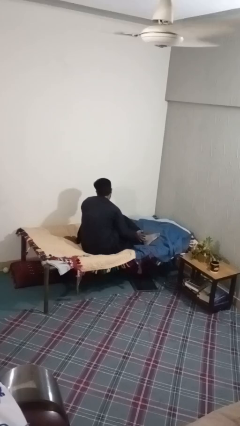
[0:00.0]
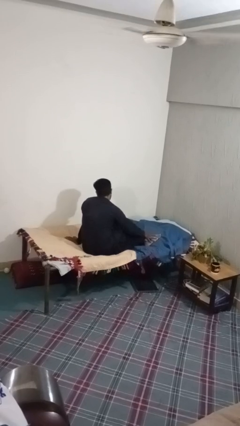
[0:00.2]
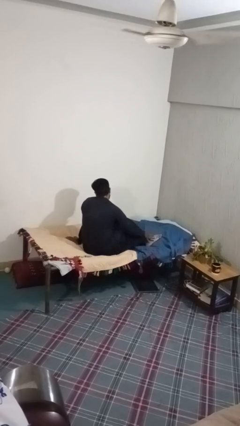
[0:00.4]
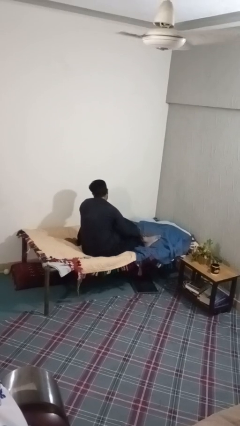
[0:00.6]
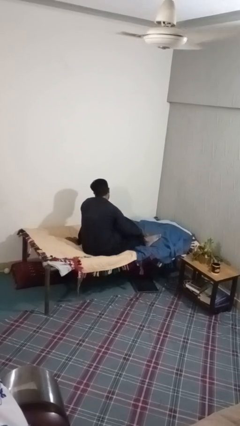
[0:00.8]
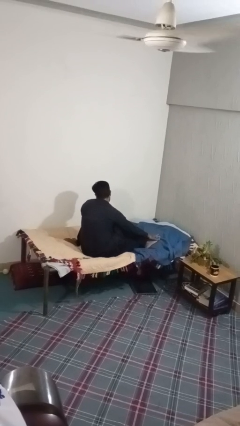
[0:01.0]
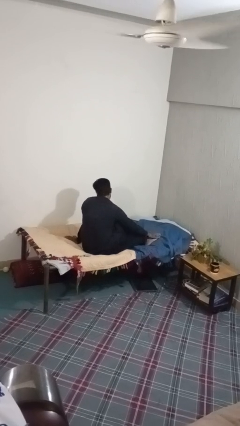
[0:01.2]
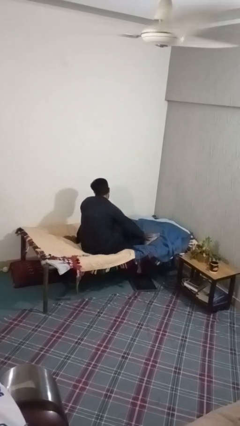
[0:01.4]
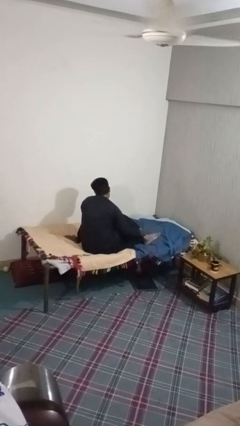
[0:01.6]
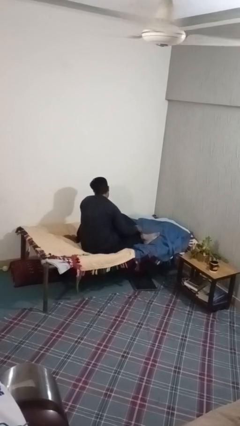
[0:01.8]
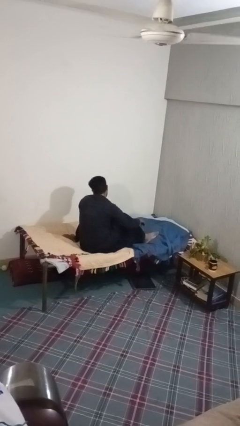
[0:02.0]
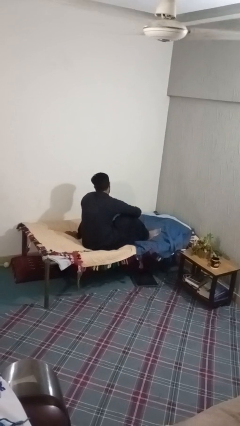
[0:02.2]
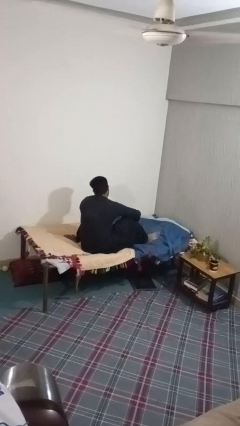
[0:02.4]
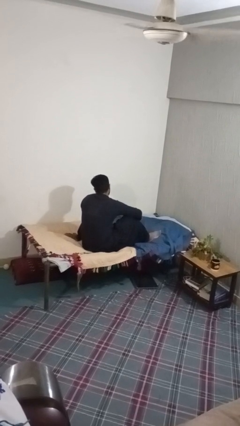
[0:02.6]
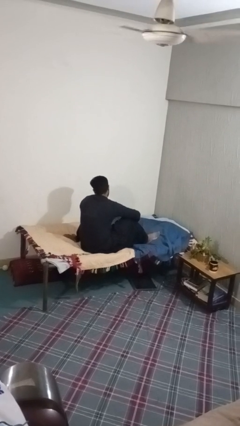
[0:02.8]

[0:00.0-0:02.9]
person rubs foot

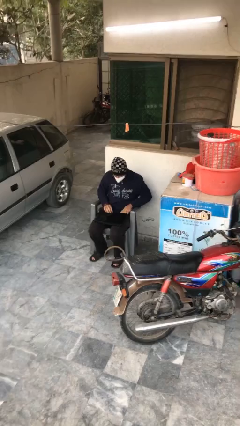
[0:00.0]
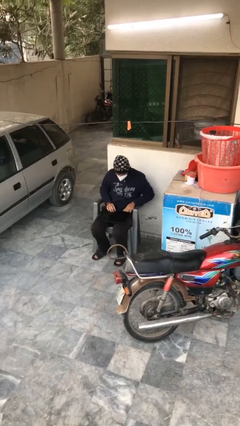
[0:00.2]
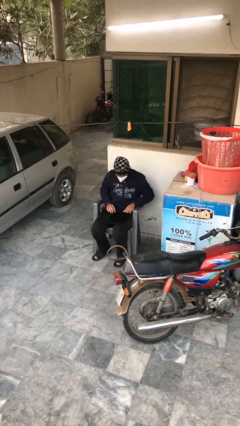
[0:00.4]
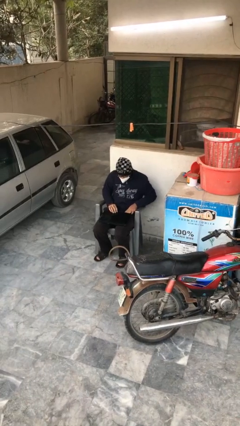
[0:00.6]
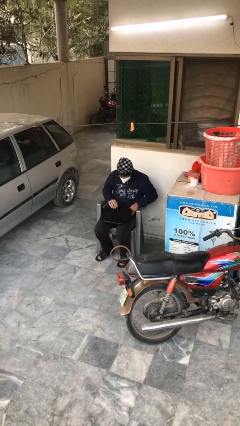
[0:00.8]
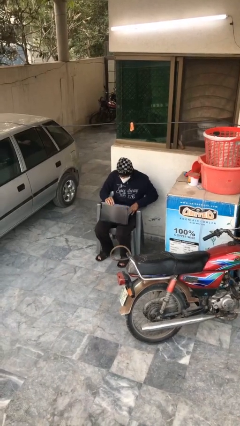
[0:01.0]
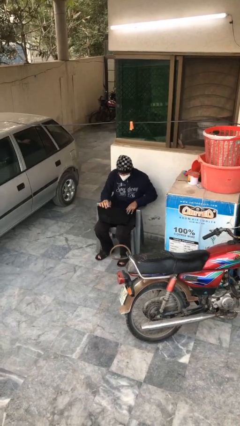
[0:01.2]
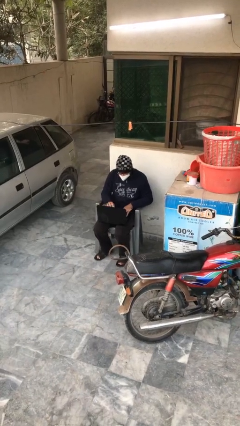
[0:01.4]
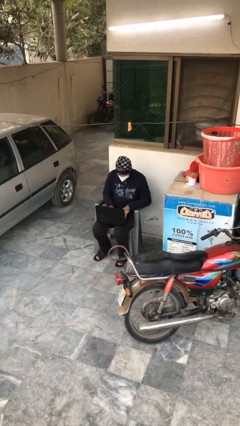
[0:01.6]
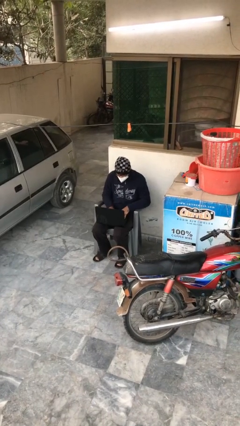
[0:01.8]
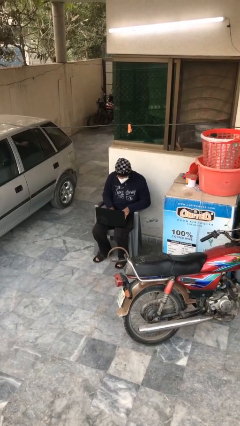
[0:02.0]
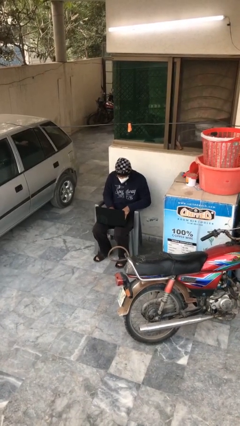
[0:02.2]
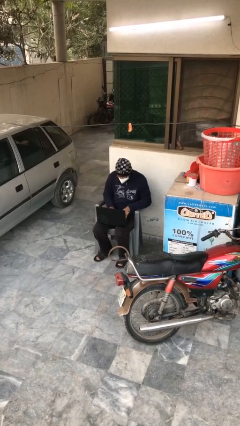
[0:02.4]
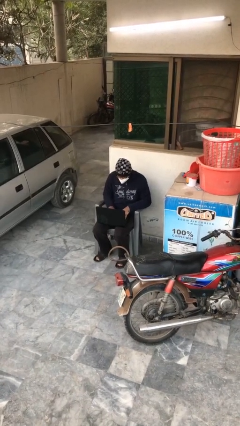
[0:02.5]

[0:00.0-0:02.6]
person interacts with laptop

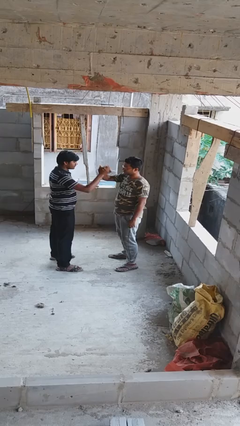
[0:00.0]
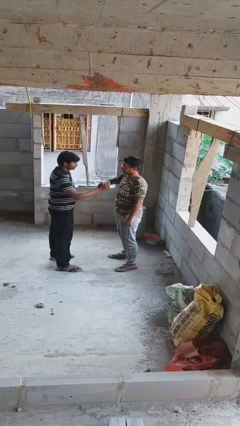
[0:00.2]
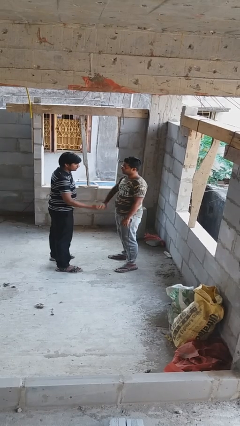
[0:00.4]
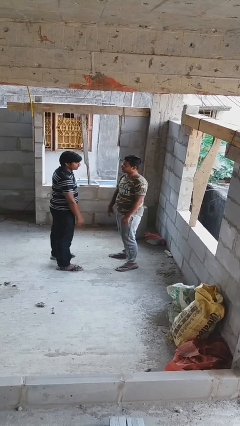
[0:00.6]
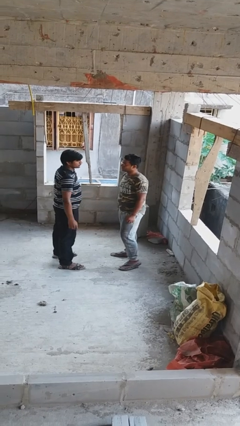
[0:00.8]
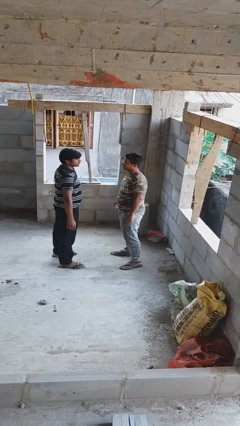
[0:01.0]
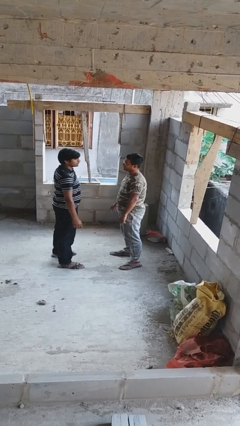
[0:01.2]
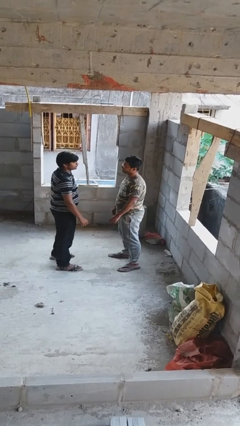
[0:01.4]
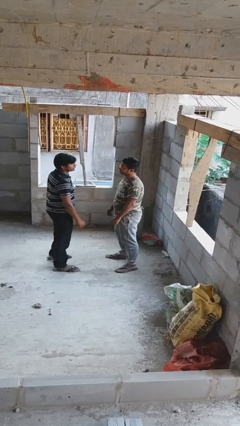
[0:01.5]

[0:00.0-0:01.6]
person highfives hand

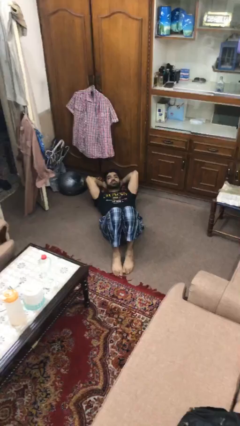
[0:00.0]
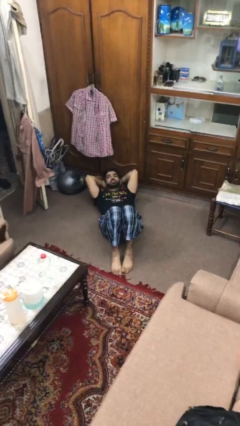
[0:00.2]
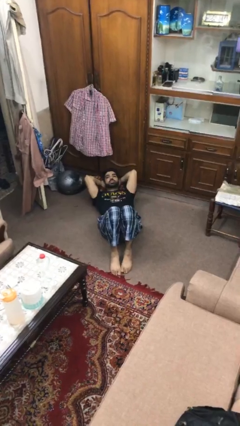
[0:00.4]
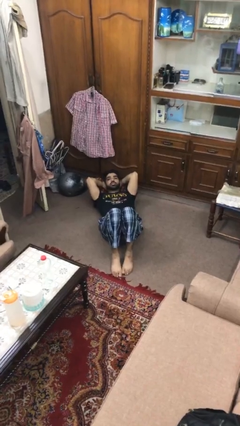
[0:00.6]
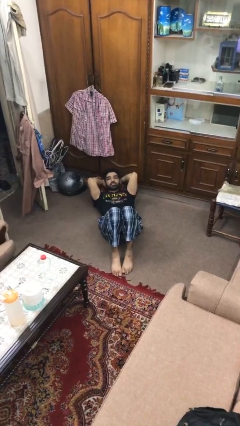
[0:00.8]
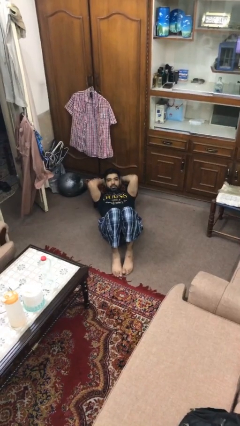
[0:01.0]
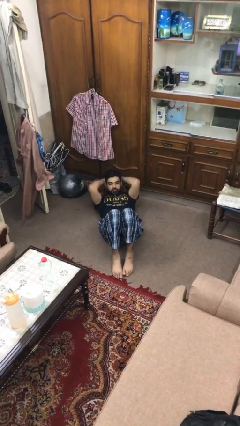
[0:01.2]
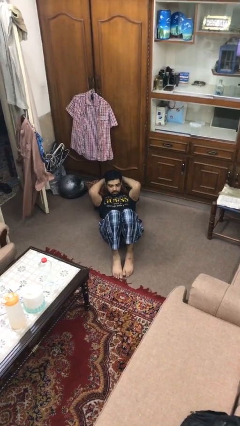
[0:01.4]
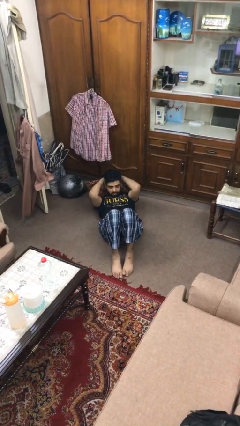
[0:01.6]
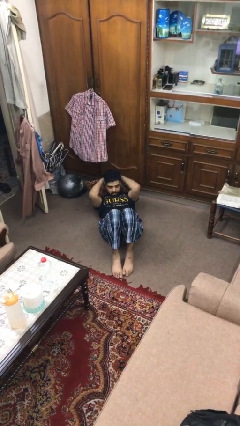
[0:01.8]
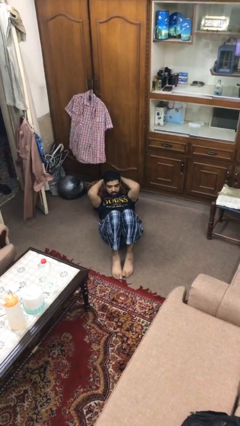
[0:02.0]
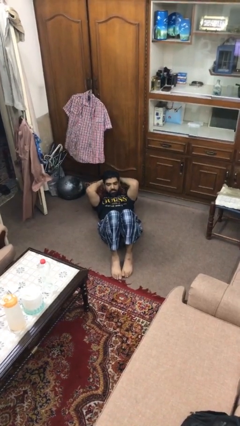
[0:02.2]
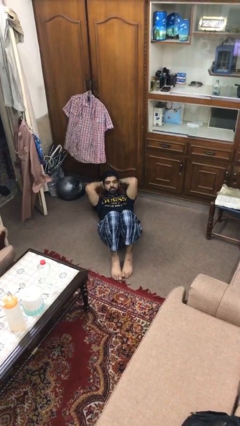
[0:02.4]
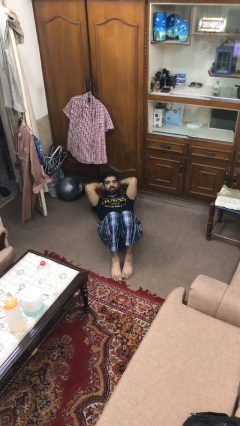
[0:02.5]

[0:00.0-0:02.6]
person exercises with situp

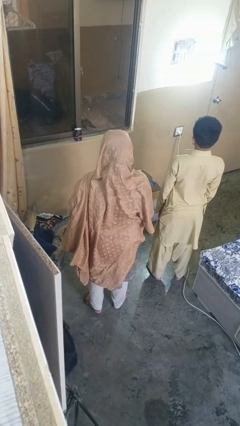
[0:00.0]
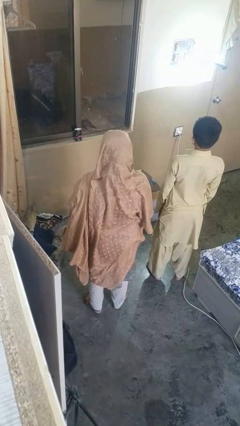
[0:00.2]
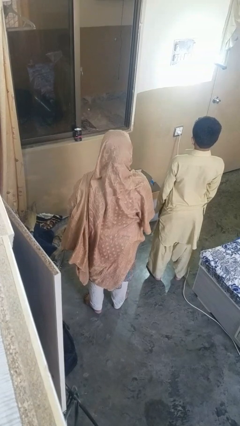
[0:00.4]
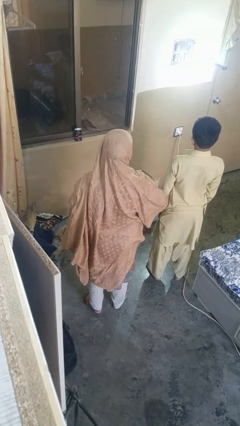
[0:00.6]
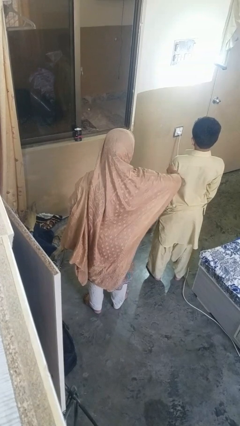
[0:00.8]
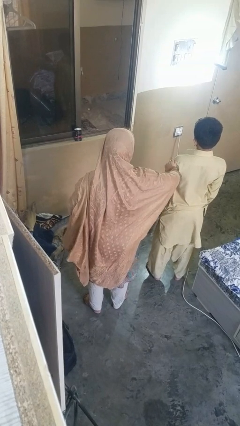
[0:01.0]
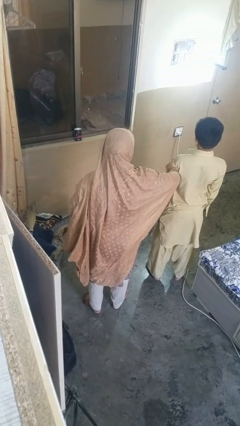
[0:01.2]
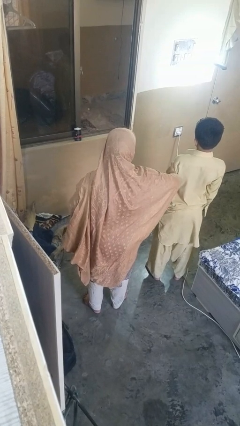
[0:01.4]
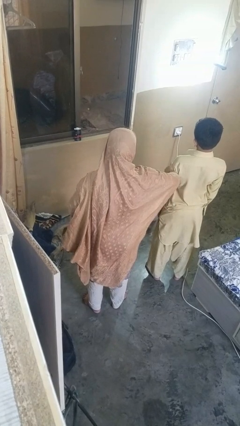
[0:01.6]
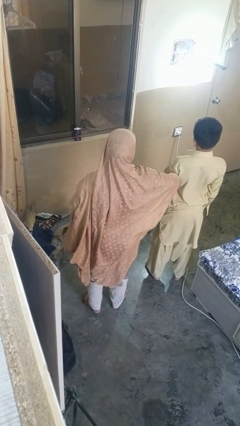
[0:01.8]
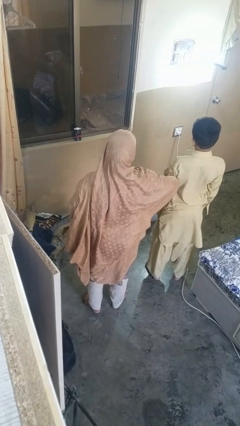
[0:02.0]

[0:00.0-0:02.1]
person grabs person by bicep

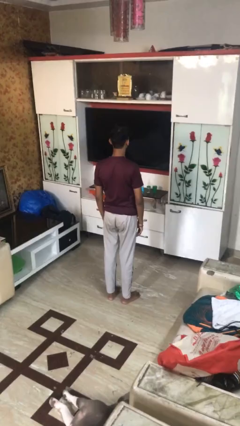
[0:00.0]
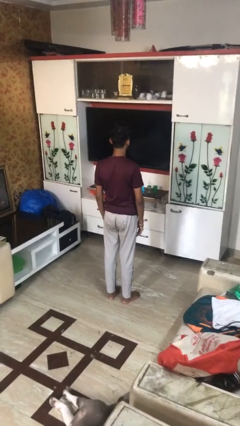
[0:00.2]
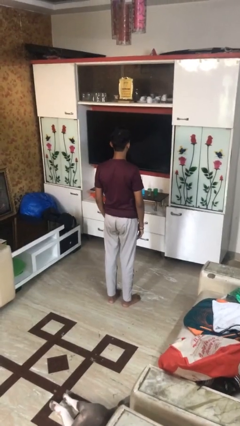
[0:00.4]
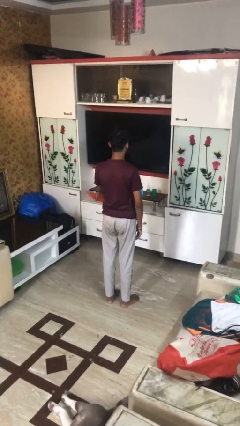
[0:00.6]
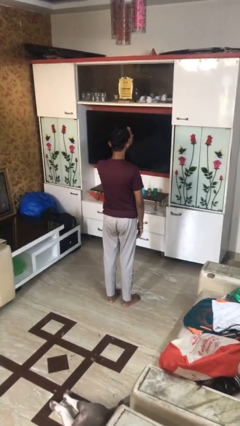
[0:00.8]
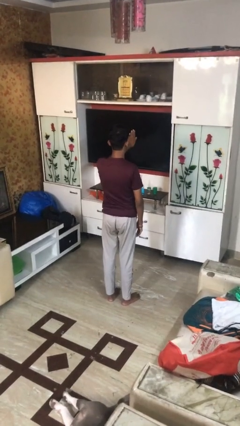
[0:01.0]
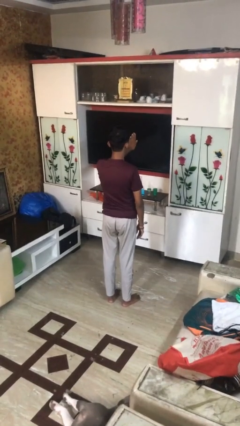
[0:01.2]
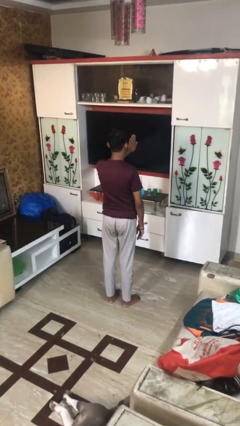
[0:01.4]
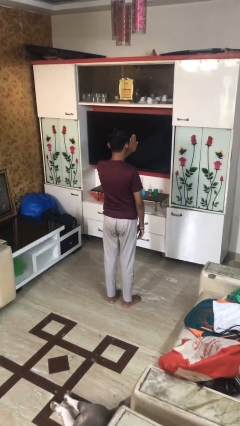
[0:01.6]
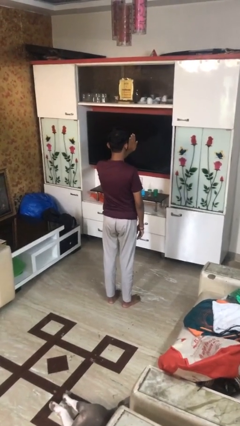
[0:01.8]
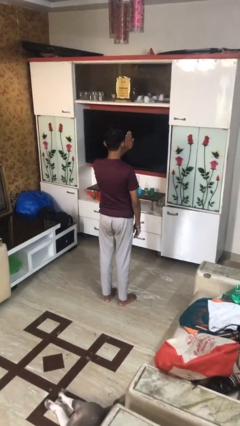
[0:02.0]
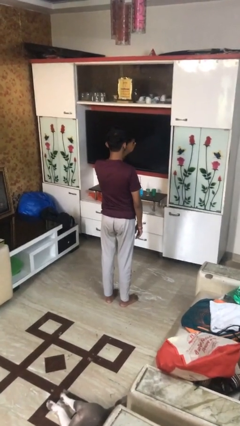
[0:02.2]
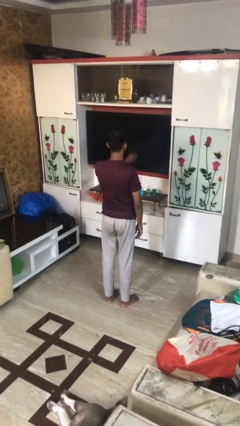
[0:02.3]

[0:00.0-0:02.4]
person gestures stop

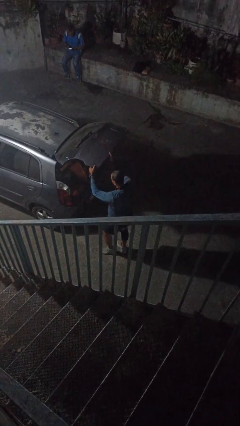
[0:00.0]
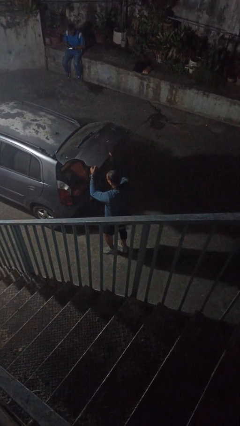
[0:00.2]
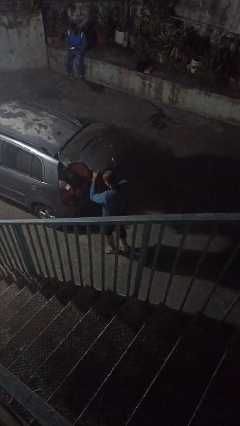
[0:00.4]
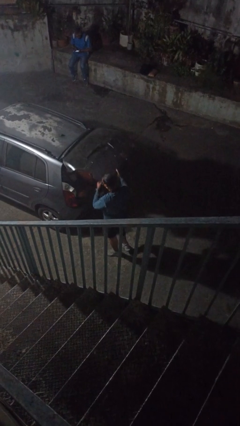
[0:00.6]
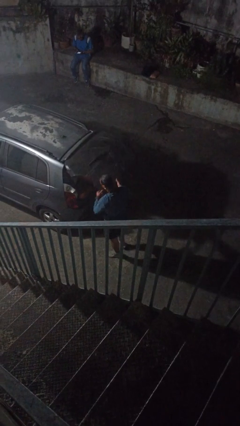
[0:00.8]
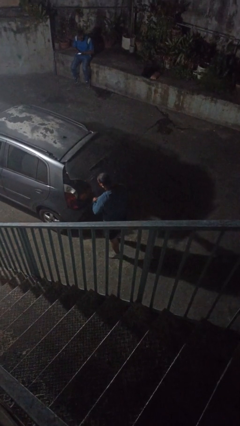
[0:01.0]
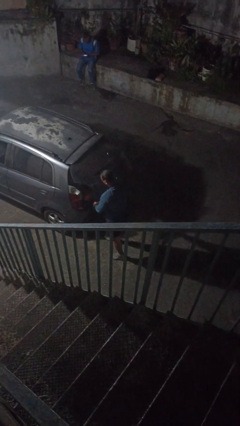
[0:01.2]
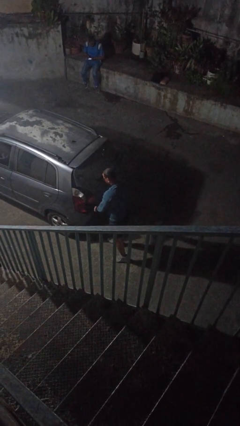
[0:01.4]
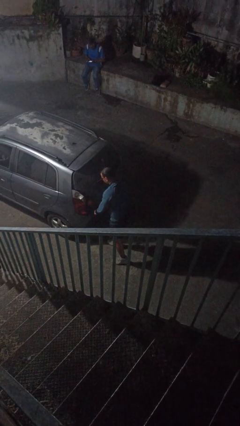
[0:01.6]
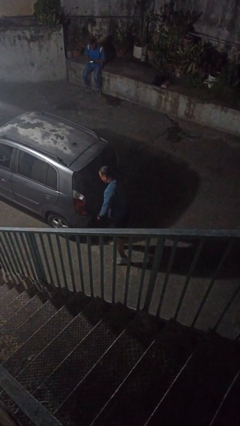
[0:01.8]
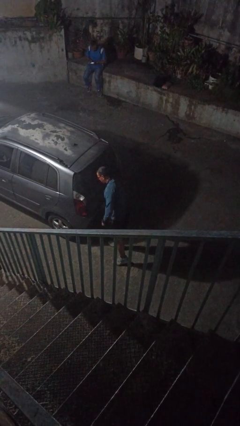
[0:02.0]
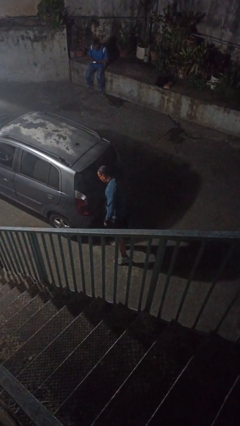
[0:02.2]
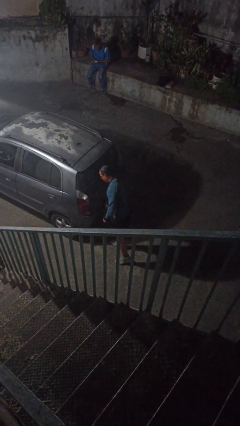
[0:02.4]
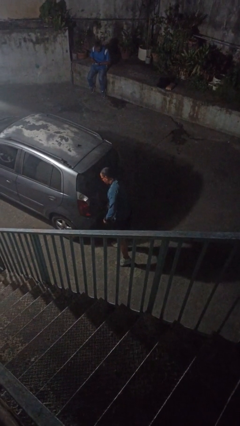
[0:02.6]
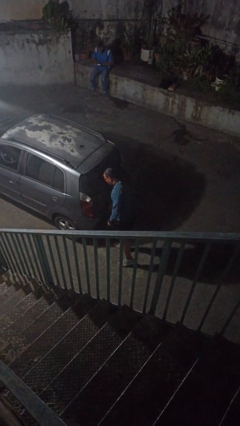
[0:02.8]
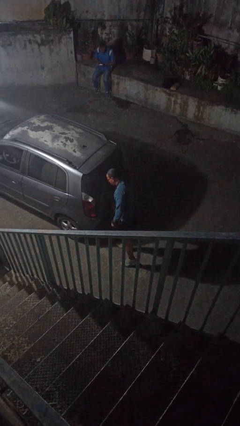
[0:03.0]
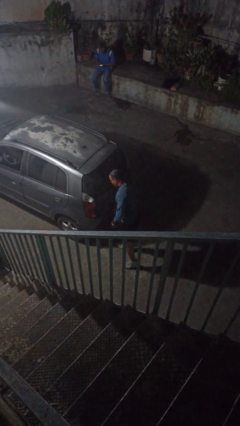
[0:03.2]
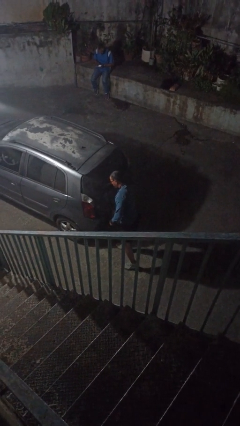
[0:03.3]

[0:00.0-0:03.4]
person closes car trunk
